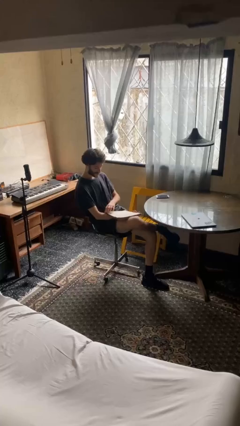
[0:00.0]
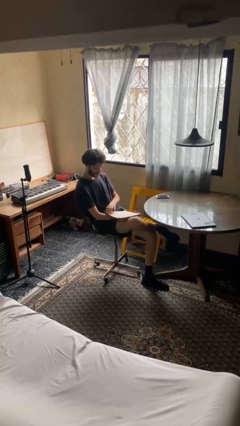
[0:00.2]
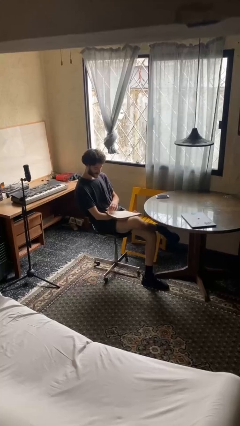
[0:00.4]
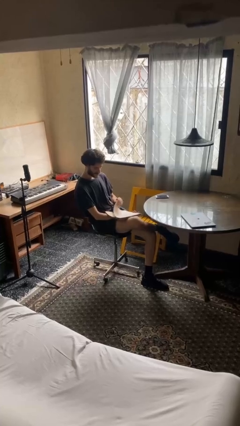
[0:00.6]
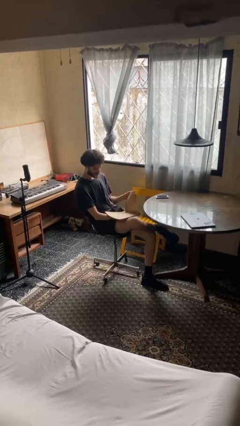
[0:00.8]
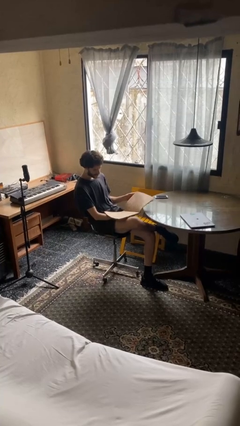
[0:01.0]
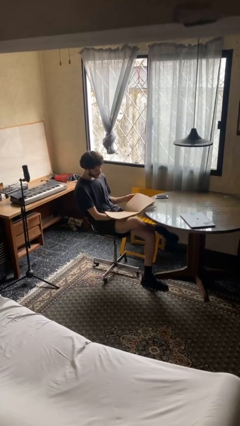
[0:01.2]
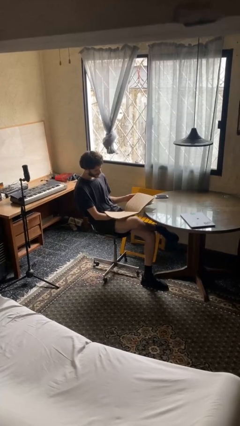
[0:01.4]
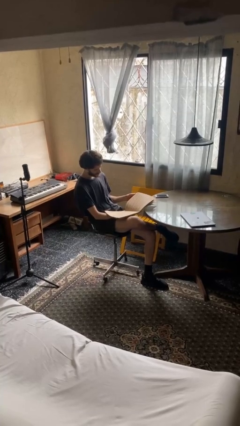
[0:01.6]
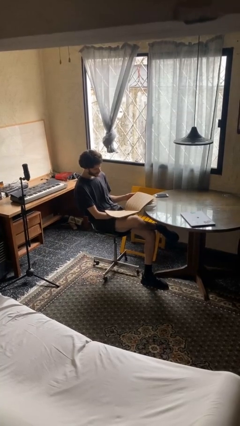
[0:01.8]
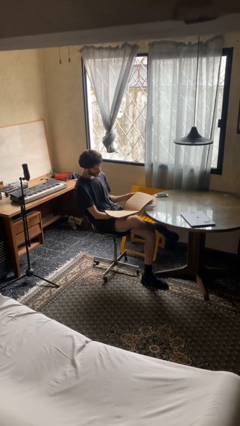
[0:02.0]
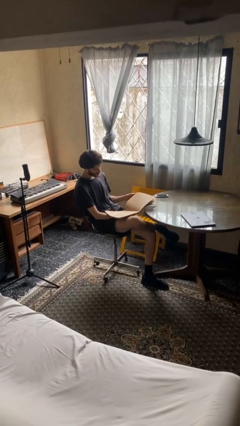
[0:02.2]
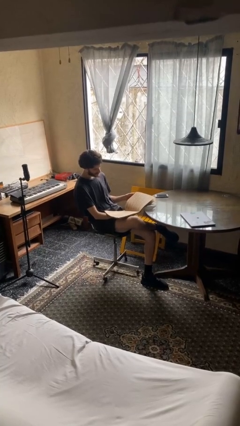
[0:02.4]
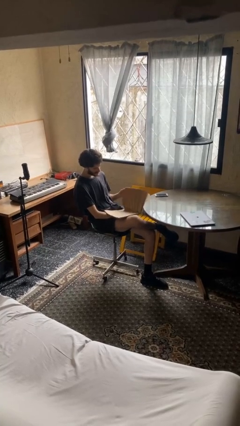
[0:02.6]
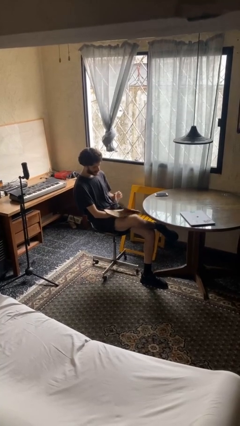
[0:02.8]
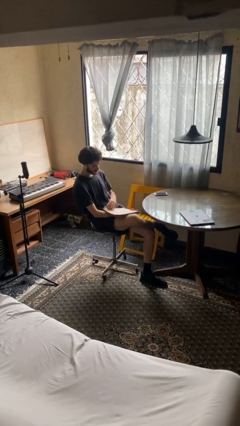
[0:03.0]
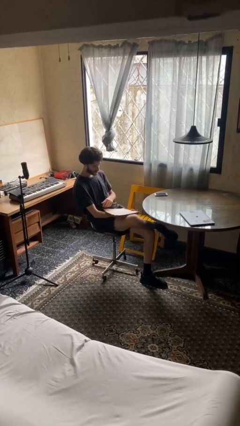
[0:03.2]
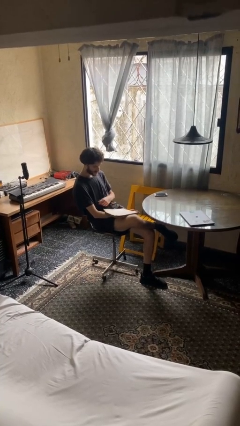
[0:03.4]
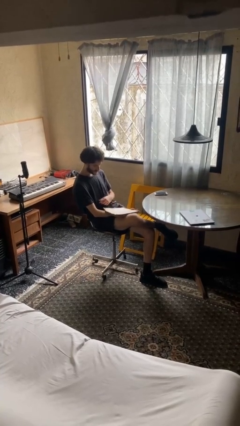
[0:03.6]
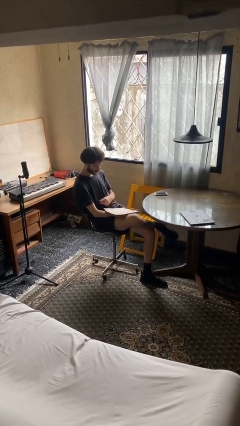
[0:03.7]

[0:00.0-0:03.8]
person reads document

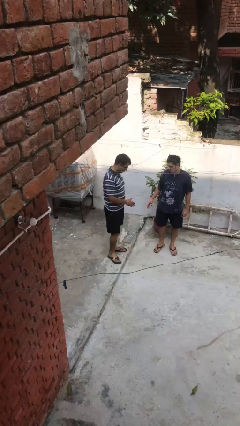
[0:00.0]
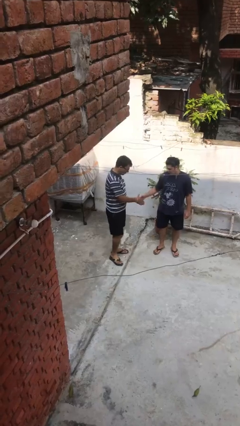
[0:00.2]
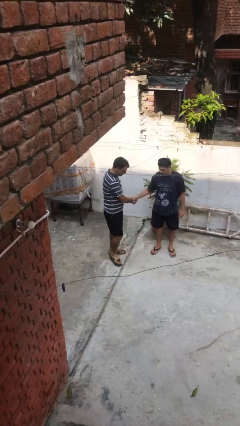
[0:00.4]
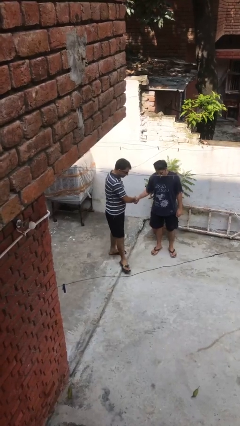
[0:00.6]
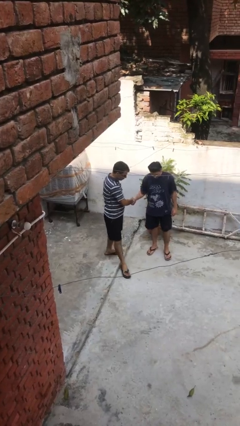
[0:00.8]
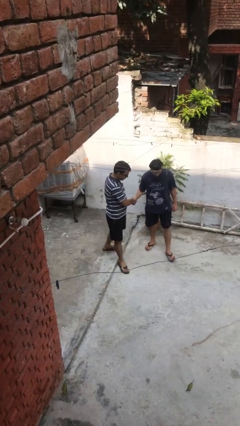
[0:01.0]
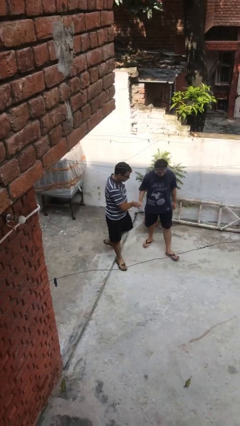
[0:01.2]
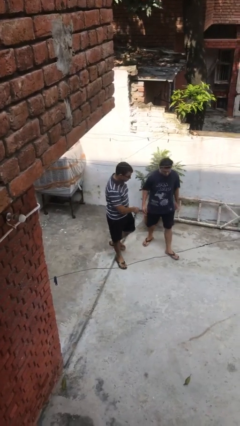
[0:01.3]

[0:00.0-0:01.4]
person shakes hand

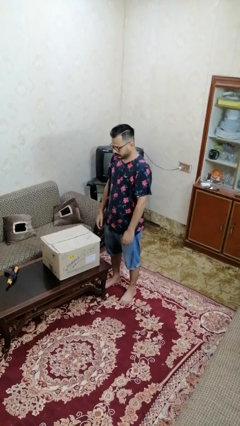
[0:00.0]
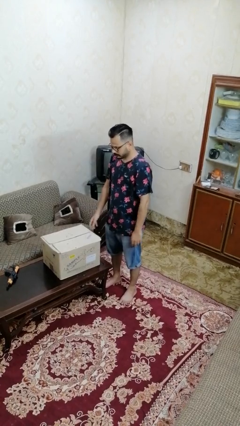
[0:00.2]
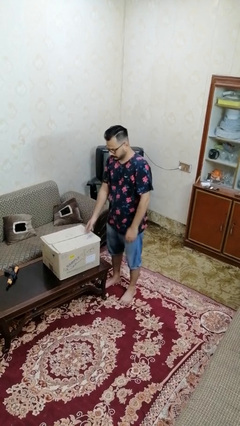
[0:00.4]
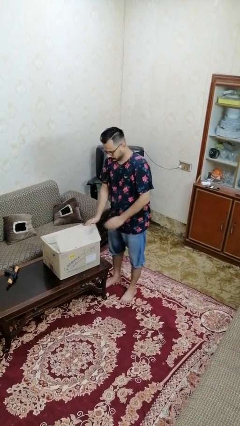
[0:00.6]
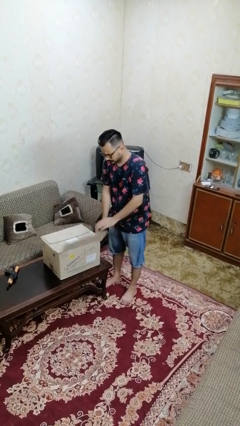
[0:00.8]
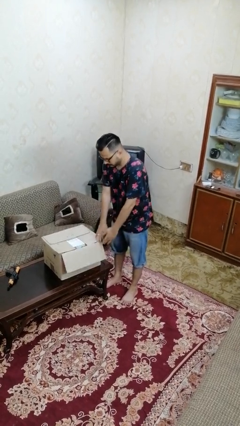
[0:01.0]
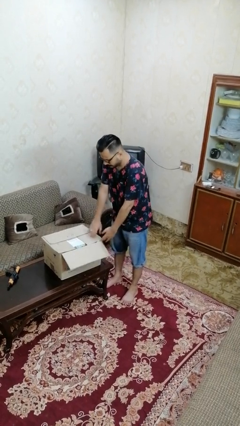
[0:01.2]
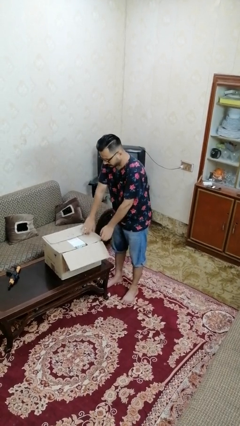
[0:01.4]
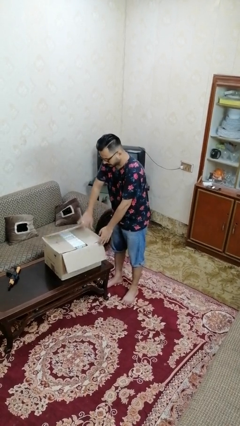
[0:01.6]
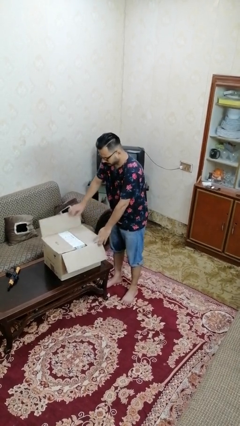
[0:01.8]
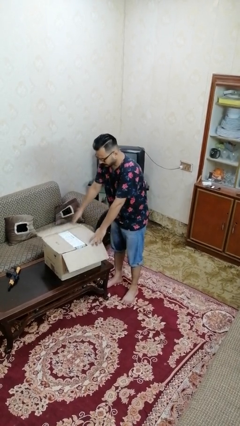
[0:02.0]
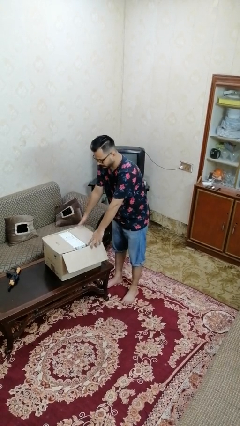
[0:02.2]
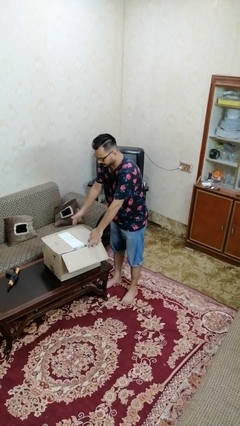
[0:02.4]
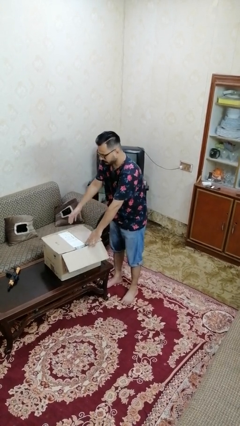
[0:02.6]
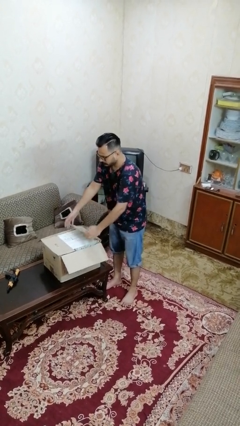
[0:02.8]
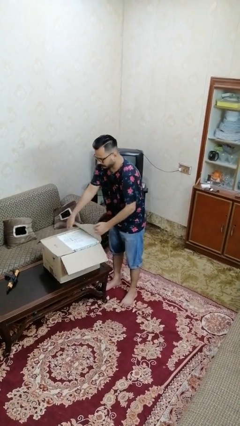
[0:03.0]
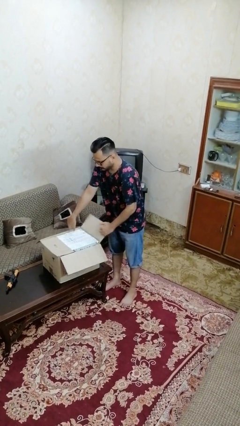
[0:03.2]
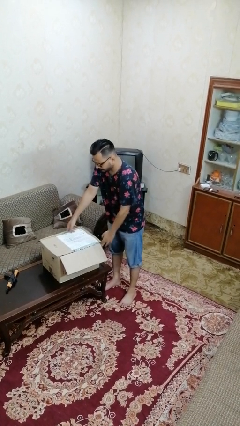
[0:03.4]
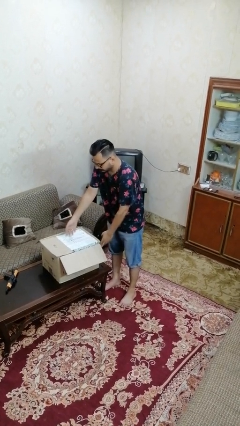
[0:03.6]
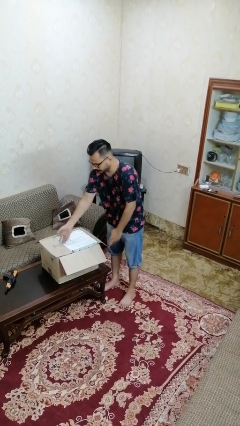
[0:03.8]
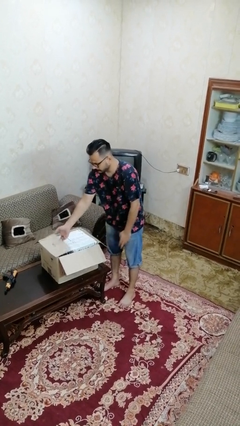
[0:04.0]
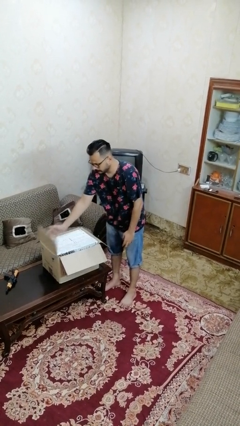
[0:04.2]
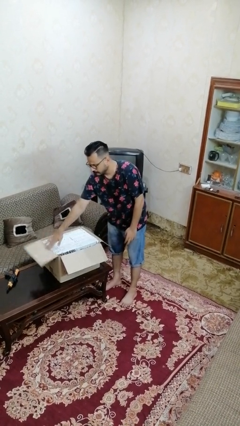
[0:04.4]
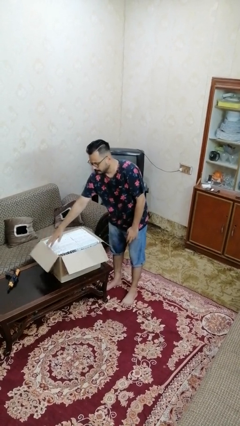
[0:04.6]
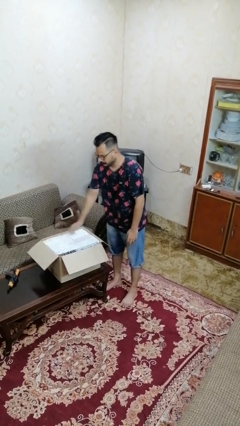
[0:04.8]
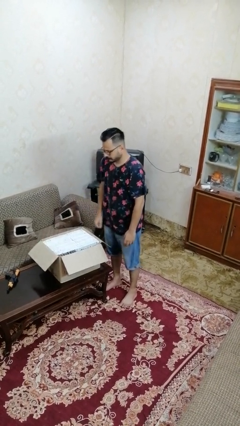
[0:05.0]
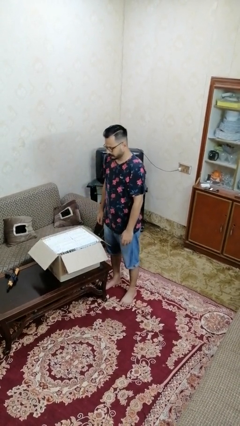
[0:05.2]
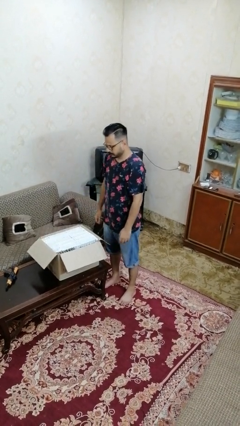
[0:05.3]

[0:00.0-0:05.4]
person opens box

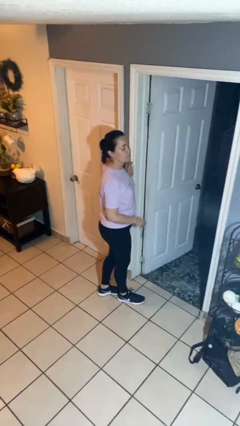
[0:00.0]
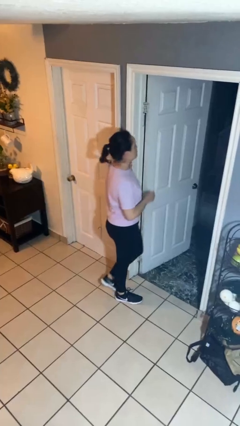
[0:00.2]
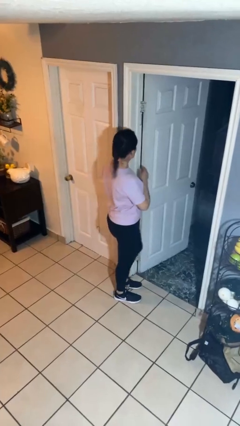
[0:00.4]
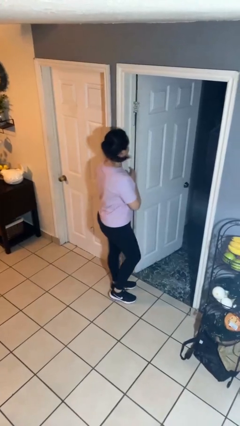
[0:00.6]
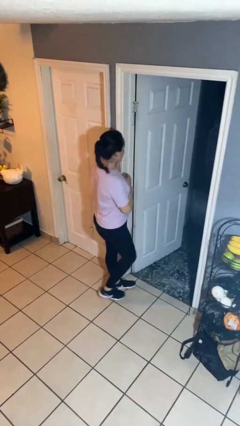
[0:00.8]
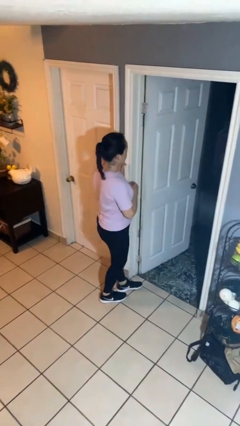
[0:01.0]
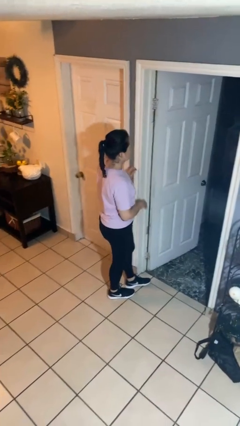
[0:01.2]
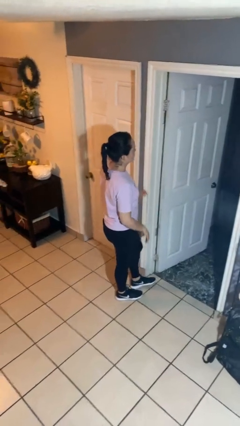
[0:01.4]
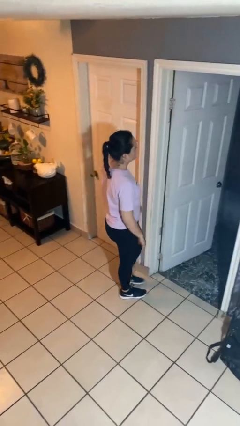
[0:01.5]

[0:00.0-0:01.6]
person bumps into wall

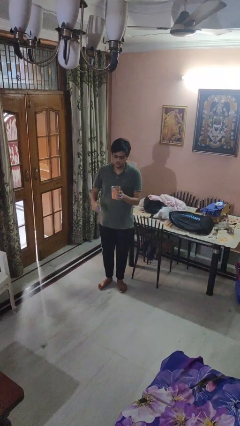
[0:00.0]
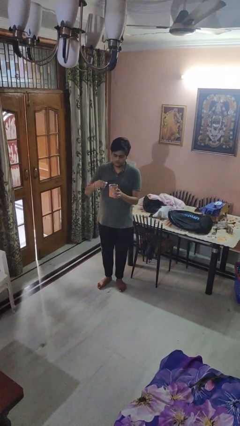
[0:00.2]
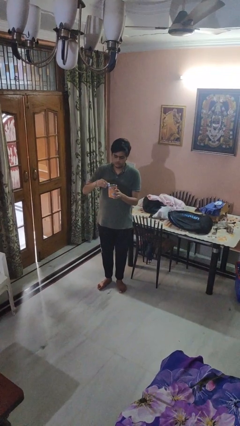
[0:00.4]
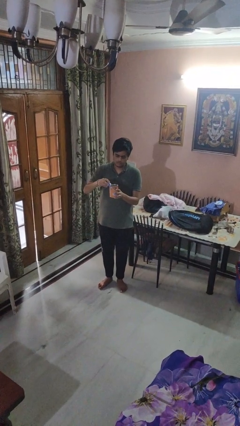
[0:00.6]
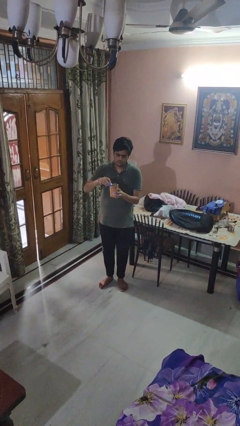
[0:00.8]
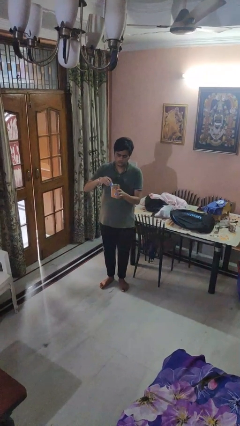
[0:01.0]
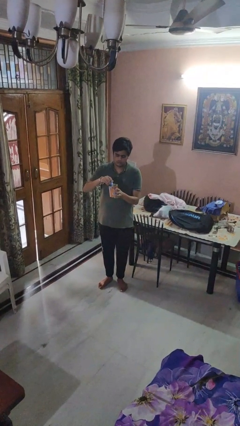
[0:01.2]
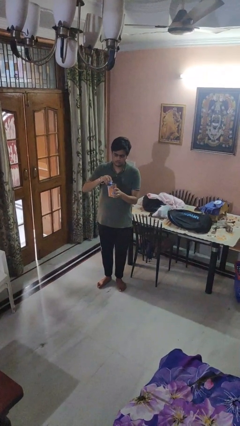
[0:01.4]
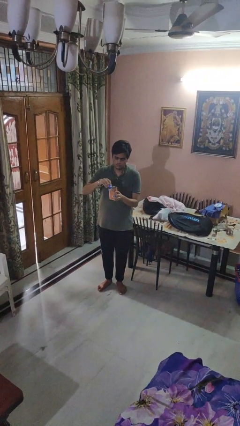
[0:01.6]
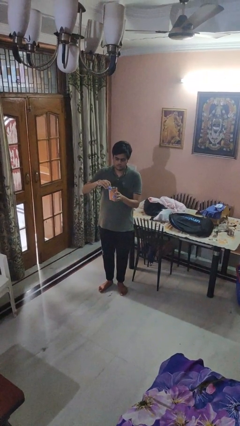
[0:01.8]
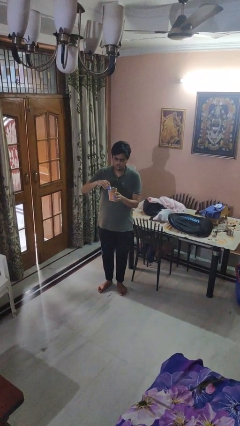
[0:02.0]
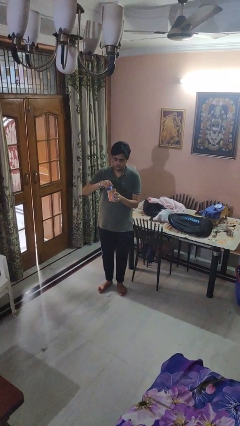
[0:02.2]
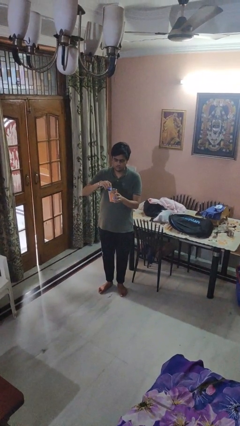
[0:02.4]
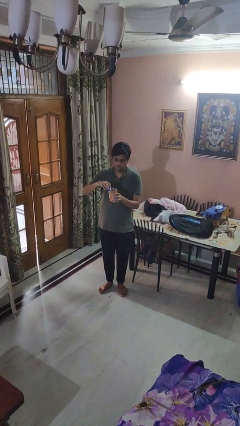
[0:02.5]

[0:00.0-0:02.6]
person opens can with can opener

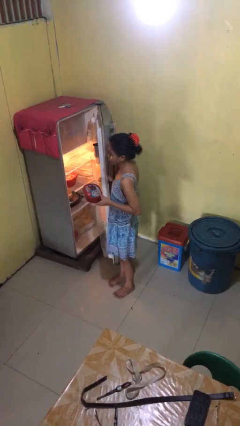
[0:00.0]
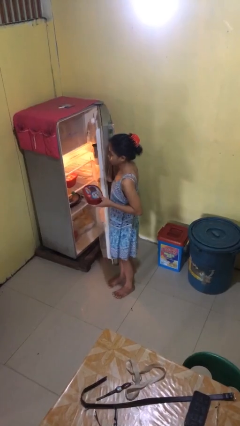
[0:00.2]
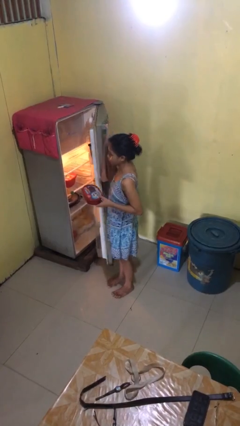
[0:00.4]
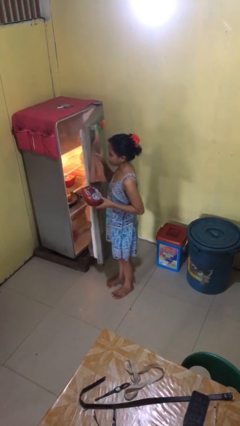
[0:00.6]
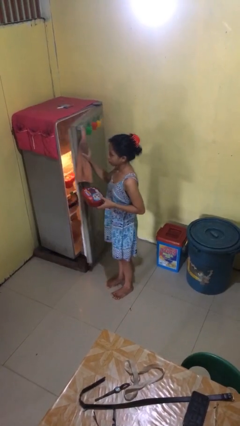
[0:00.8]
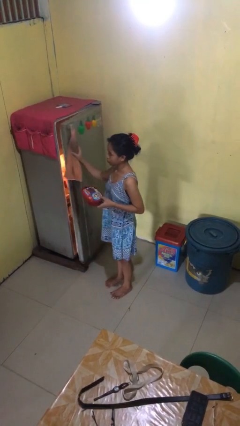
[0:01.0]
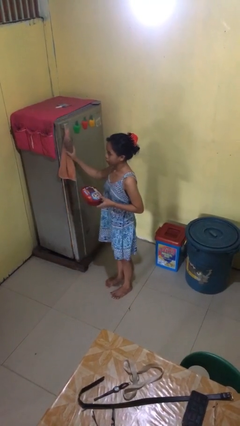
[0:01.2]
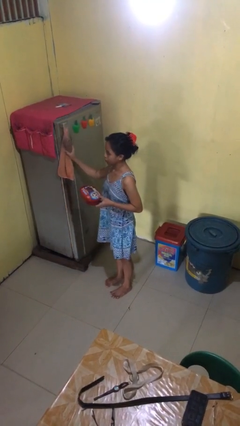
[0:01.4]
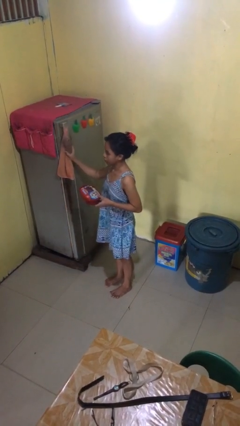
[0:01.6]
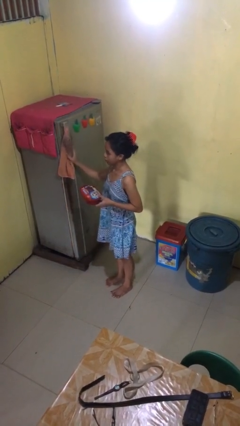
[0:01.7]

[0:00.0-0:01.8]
person closes refrigerator

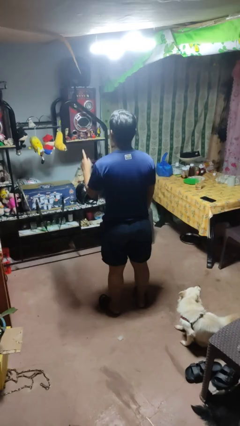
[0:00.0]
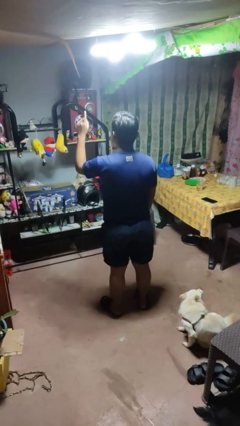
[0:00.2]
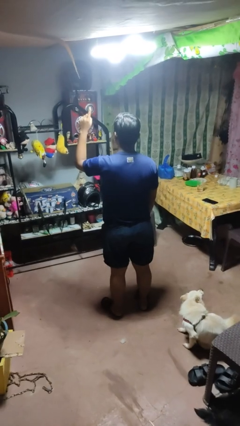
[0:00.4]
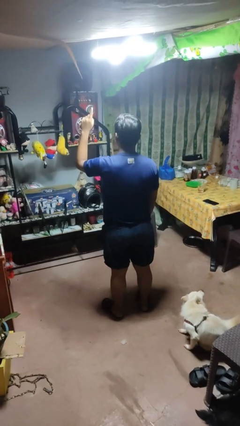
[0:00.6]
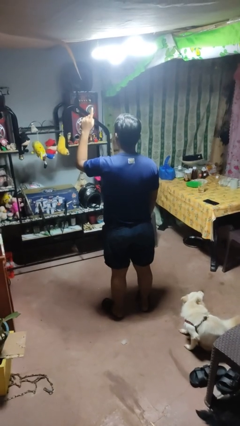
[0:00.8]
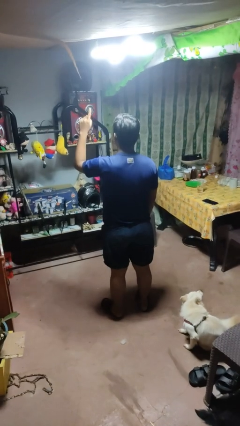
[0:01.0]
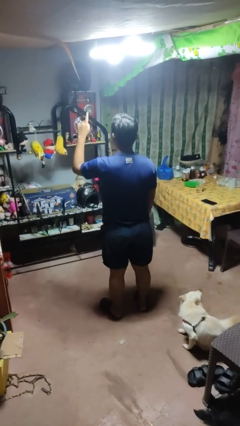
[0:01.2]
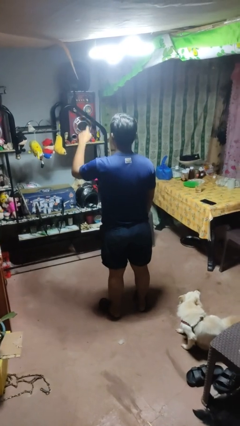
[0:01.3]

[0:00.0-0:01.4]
person gestures number one
